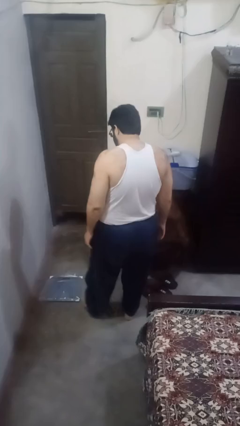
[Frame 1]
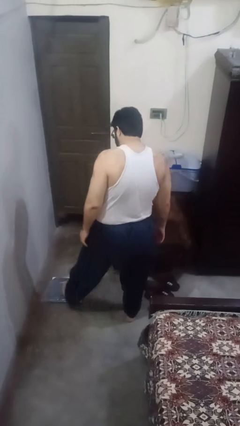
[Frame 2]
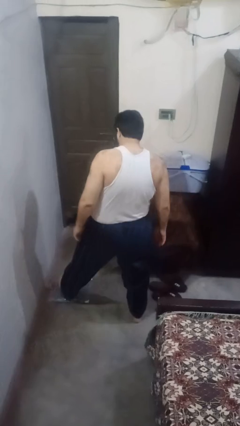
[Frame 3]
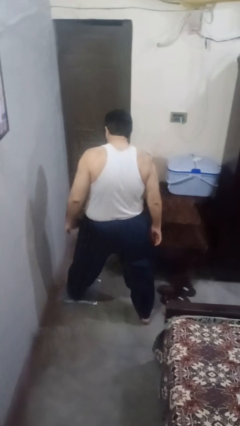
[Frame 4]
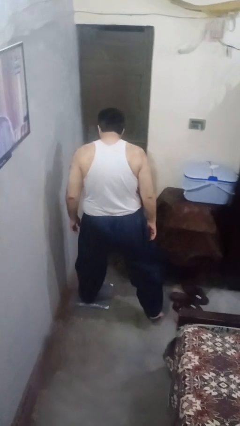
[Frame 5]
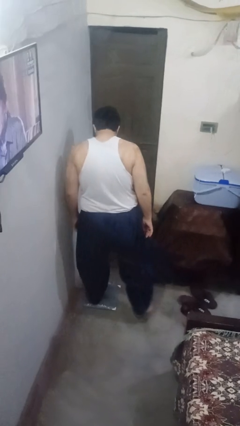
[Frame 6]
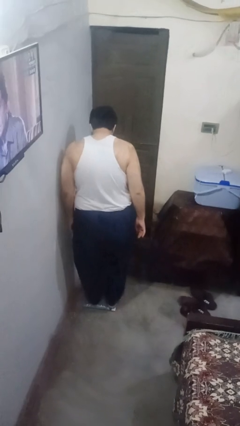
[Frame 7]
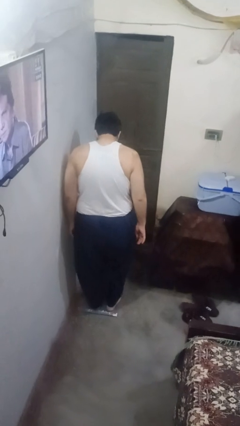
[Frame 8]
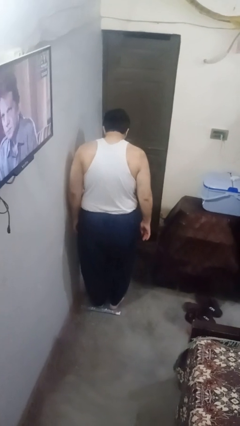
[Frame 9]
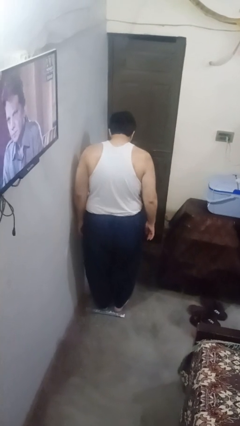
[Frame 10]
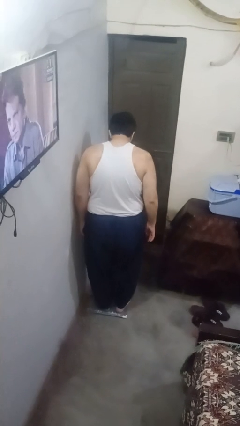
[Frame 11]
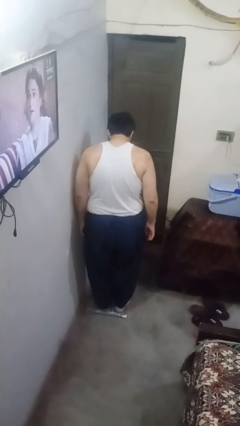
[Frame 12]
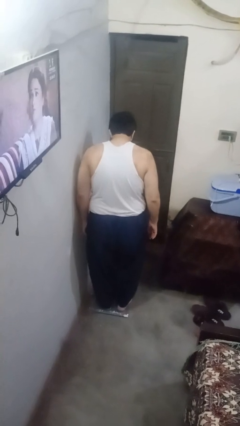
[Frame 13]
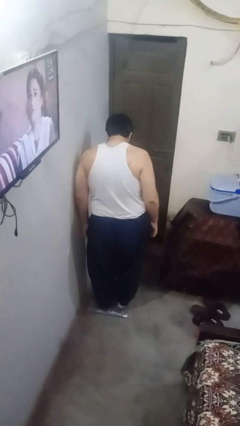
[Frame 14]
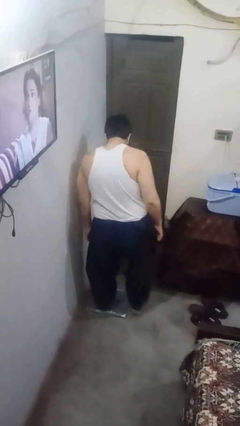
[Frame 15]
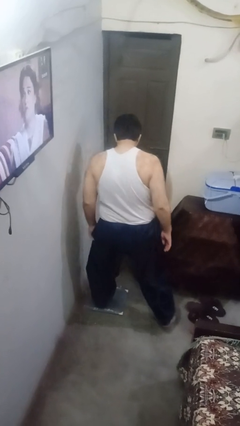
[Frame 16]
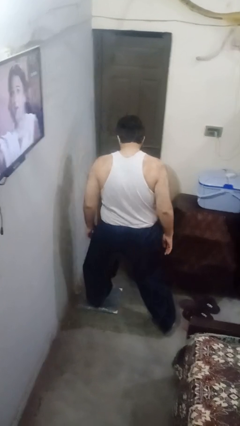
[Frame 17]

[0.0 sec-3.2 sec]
person uses bodyweight scale

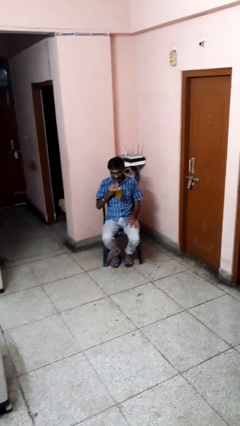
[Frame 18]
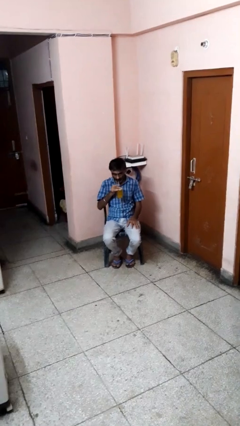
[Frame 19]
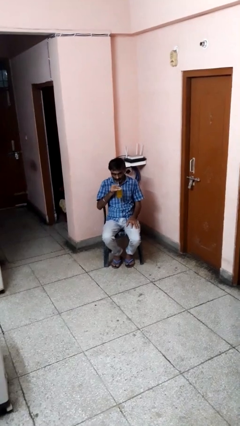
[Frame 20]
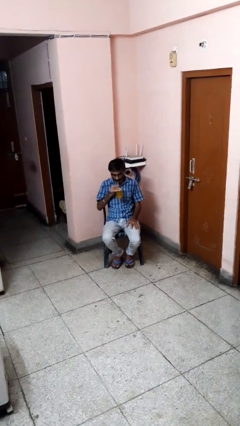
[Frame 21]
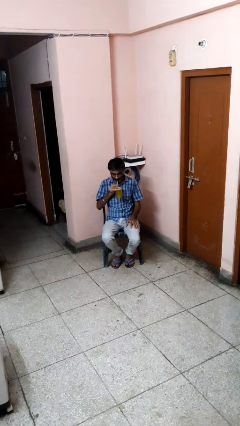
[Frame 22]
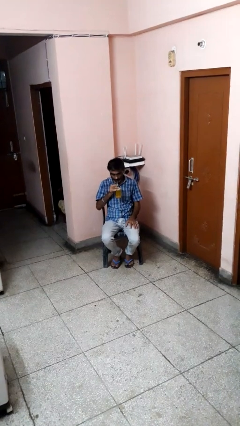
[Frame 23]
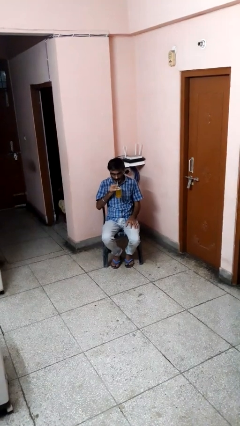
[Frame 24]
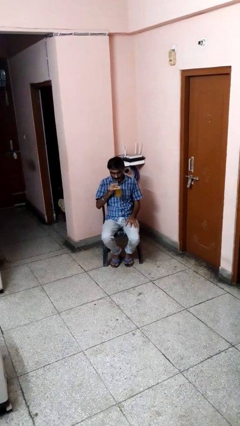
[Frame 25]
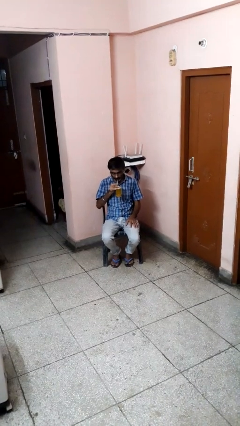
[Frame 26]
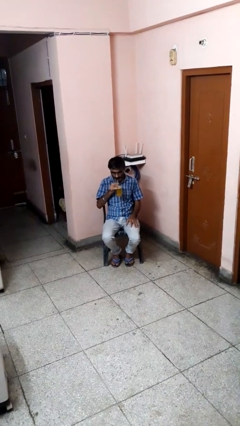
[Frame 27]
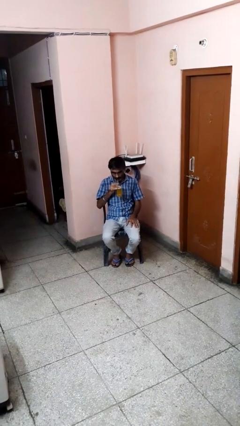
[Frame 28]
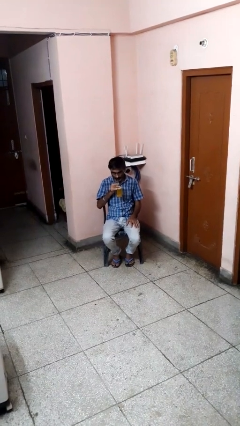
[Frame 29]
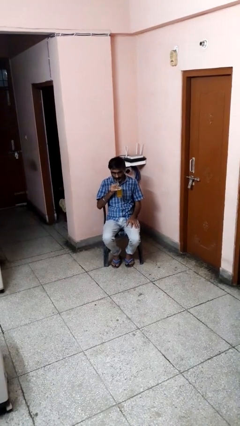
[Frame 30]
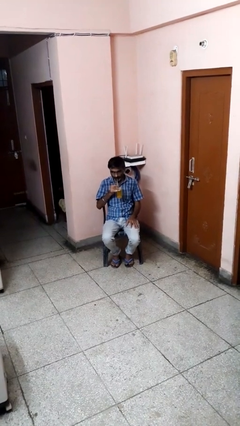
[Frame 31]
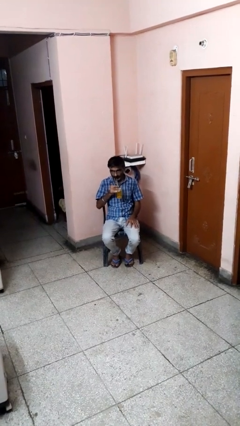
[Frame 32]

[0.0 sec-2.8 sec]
person drinks from straw

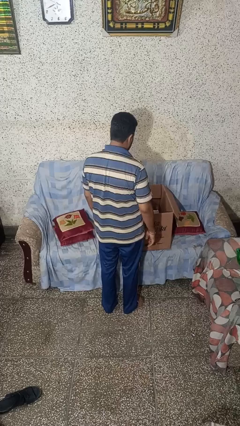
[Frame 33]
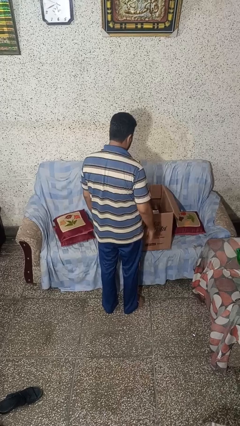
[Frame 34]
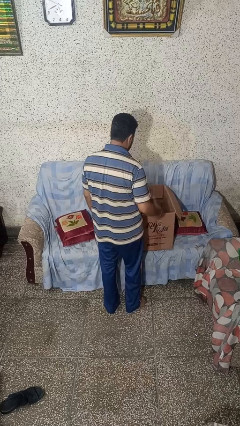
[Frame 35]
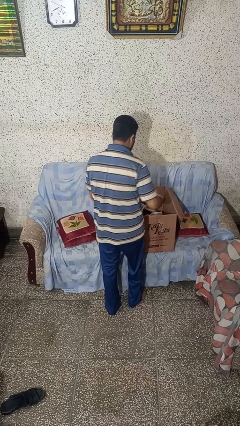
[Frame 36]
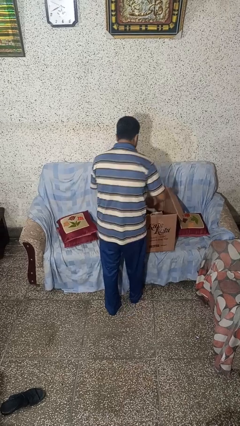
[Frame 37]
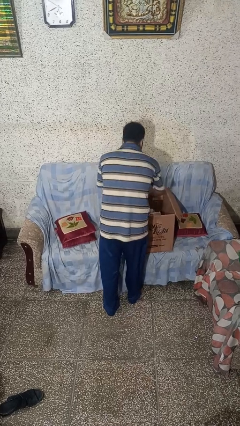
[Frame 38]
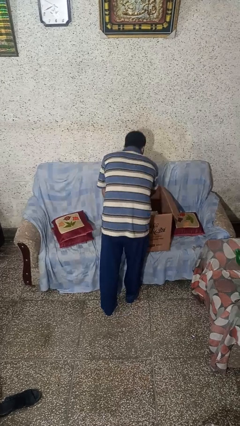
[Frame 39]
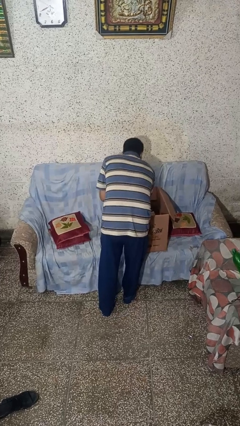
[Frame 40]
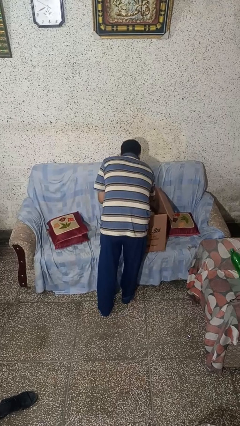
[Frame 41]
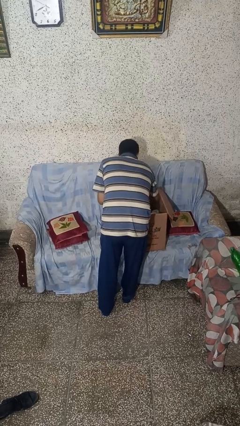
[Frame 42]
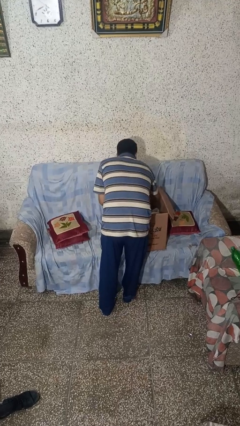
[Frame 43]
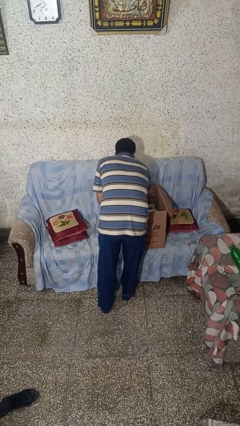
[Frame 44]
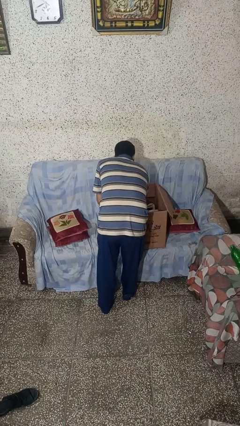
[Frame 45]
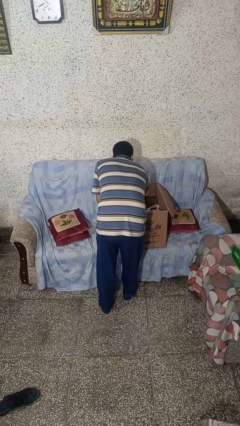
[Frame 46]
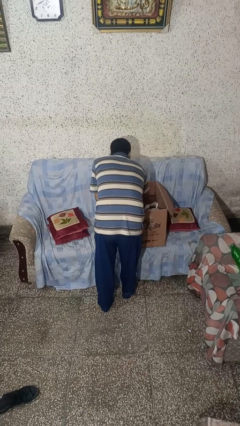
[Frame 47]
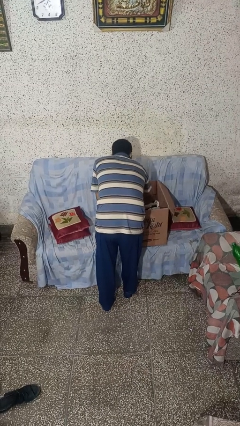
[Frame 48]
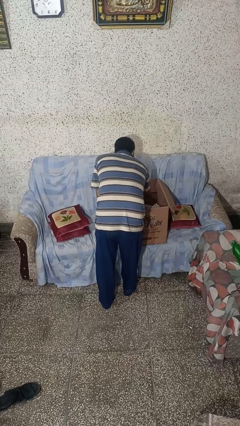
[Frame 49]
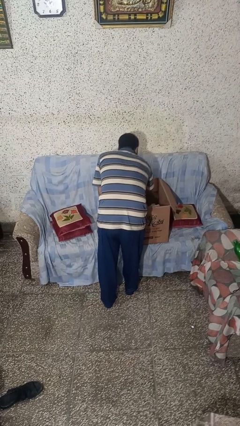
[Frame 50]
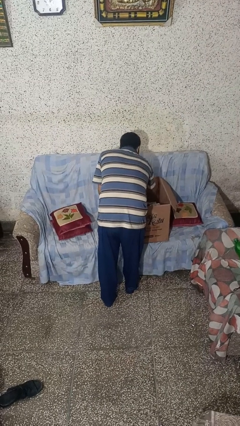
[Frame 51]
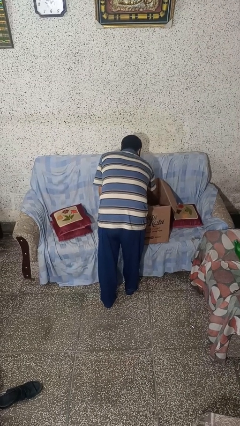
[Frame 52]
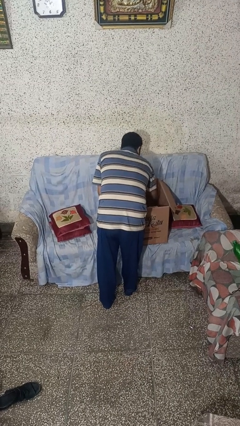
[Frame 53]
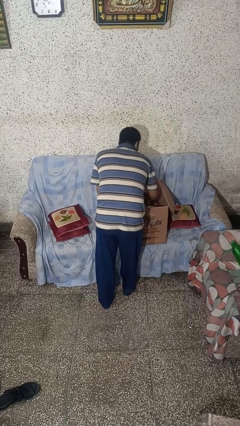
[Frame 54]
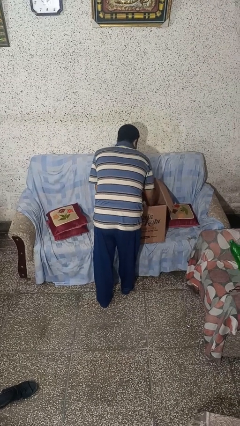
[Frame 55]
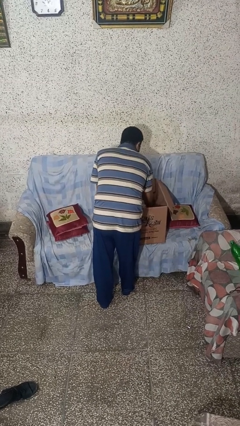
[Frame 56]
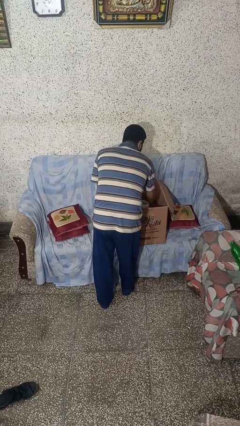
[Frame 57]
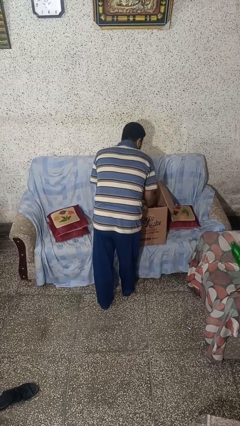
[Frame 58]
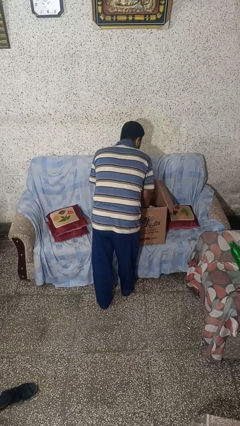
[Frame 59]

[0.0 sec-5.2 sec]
person searches in box

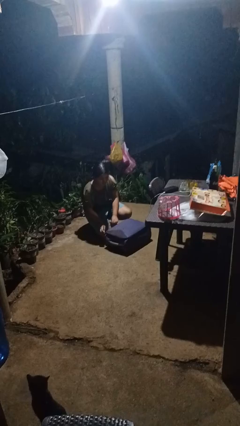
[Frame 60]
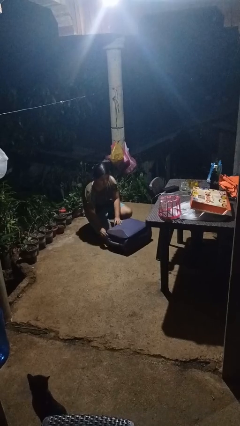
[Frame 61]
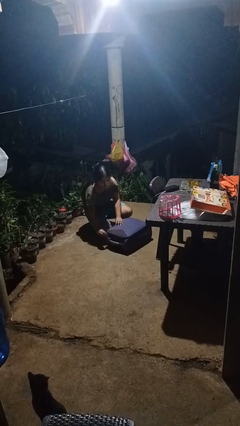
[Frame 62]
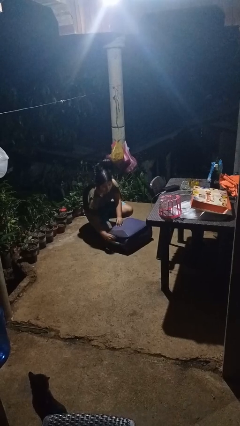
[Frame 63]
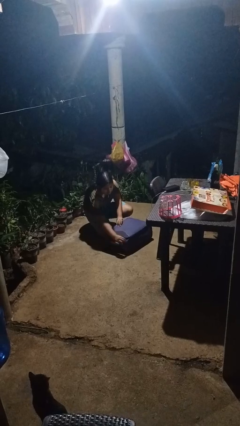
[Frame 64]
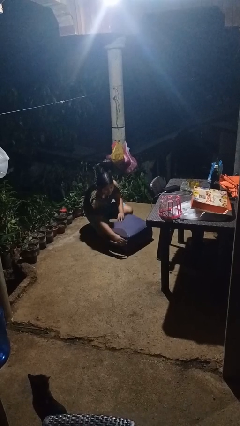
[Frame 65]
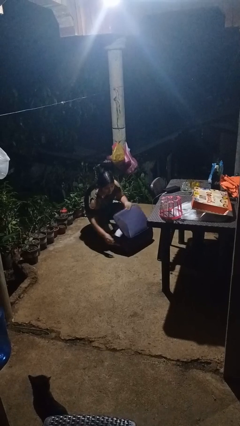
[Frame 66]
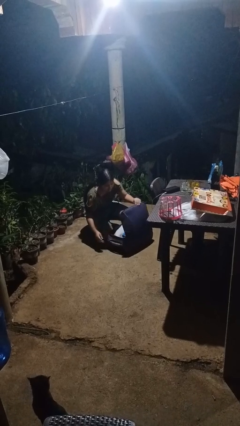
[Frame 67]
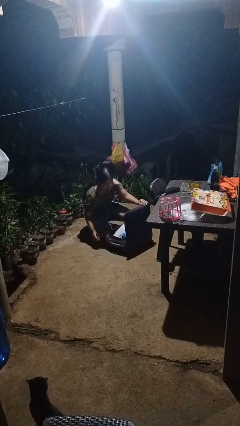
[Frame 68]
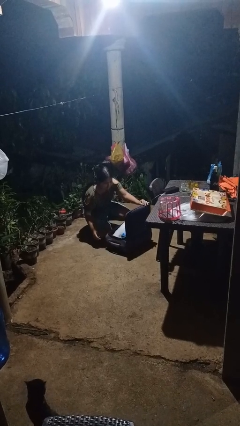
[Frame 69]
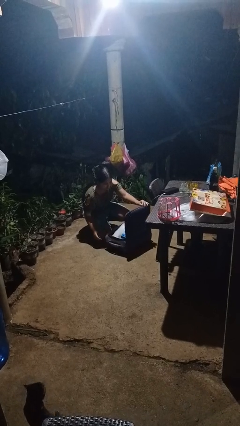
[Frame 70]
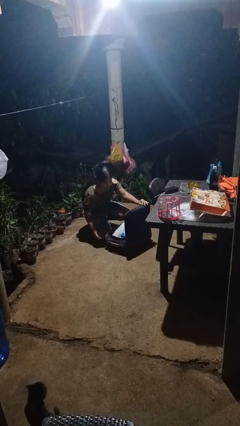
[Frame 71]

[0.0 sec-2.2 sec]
person opens suitcase

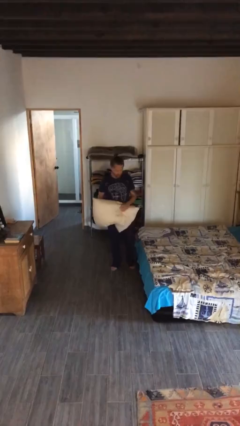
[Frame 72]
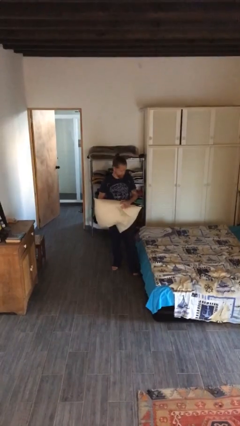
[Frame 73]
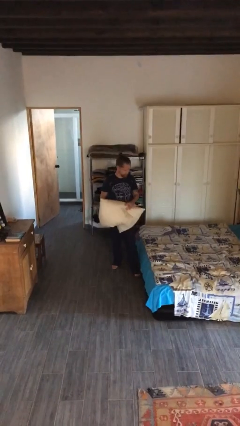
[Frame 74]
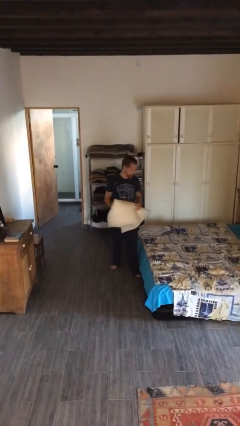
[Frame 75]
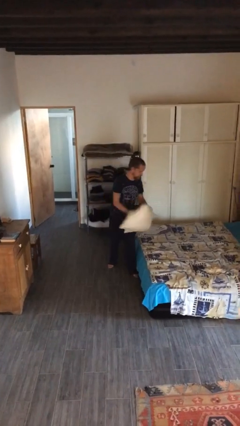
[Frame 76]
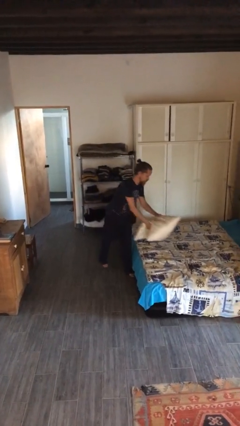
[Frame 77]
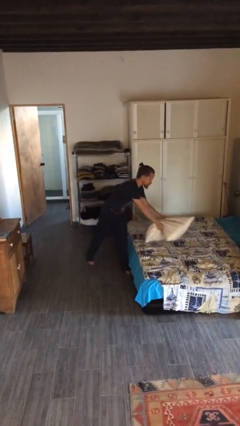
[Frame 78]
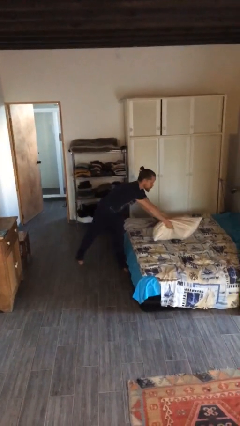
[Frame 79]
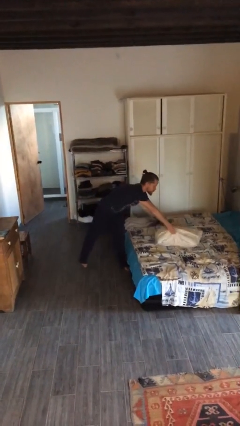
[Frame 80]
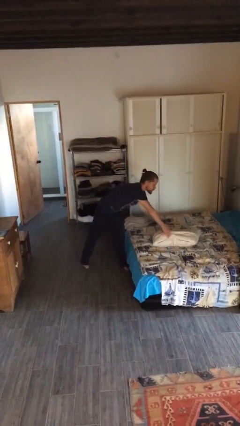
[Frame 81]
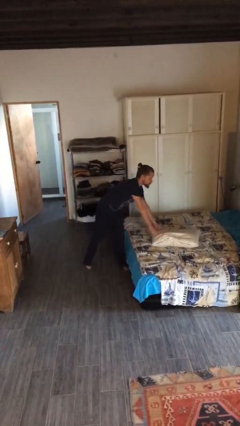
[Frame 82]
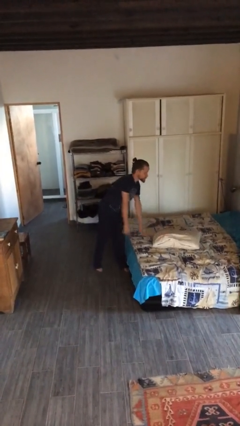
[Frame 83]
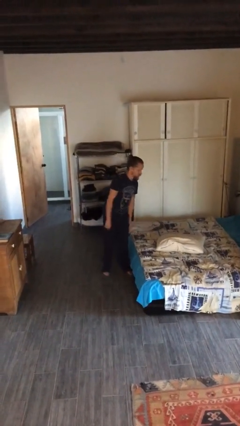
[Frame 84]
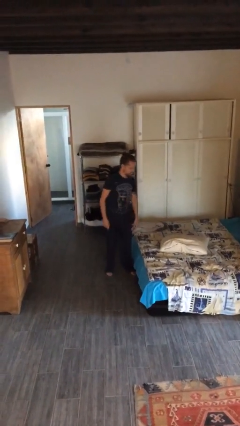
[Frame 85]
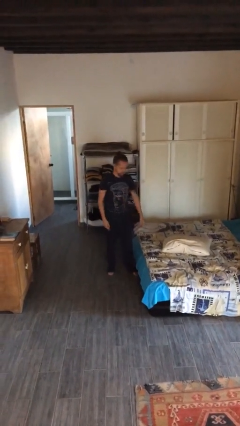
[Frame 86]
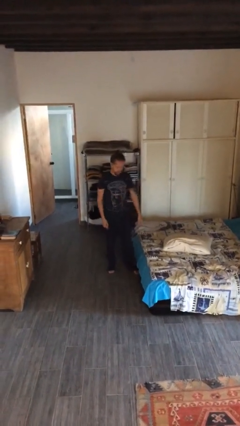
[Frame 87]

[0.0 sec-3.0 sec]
person puts down object on bed

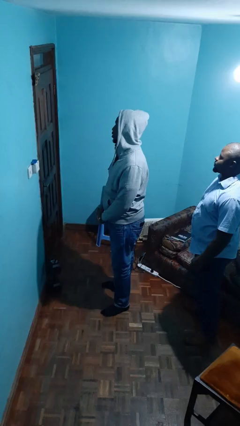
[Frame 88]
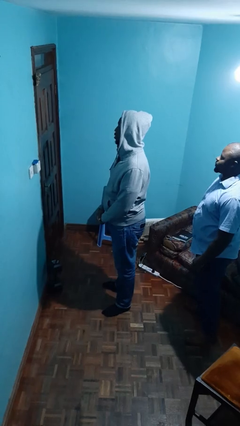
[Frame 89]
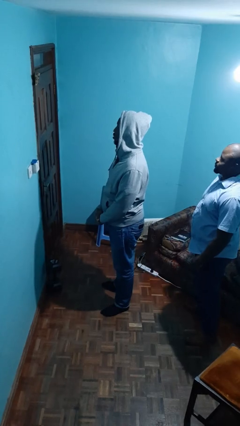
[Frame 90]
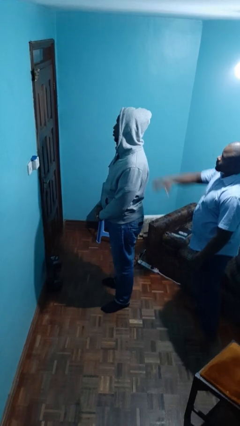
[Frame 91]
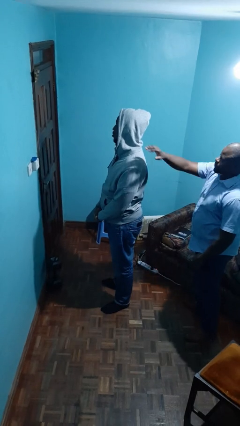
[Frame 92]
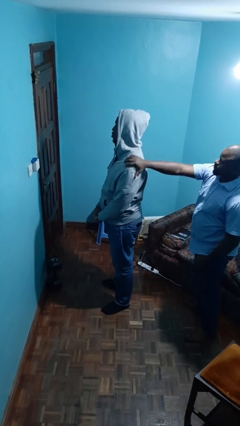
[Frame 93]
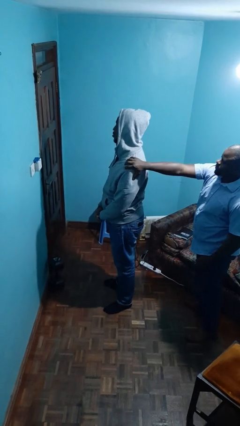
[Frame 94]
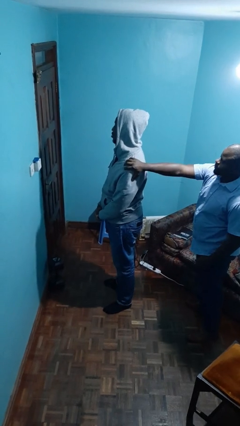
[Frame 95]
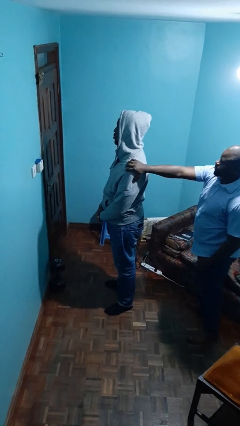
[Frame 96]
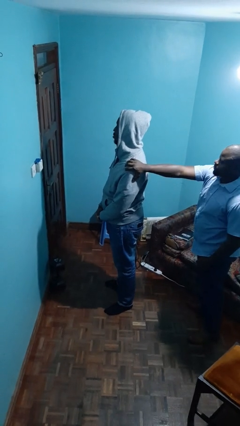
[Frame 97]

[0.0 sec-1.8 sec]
person grabs person by shoulder
